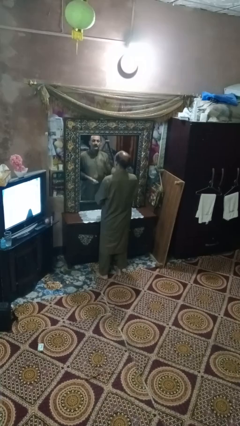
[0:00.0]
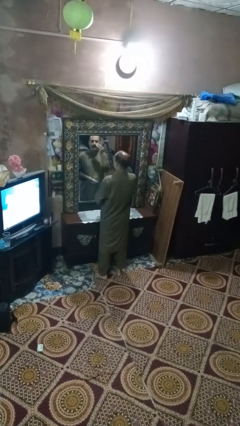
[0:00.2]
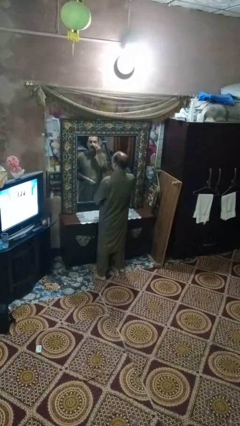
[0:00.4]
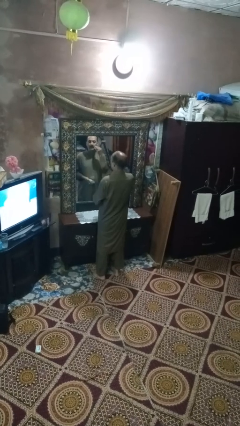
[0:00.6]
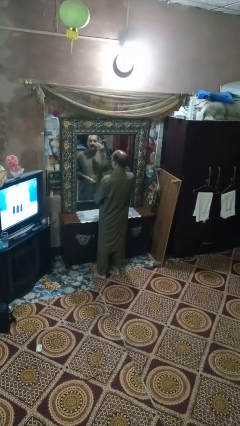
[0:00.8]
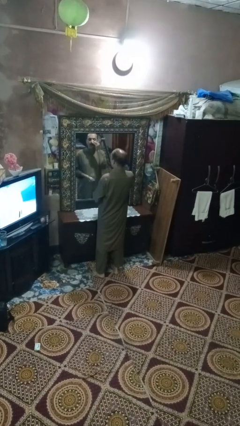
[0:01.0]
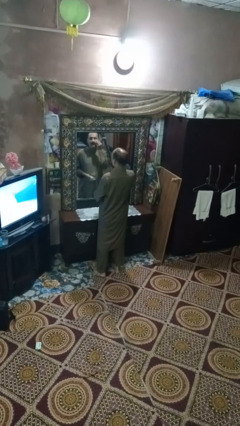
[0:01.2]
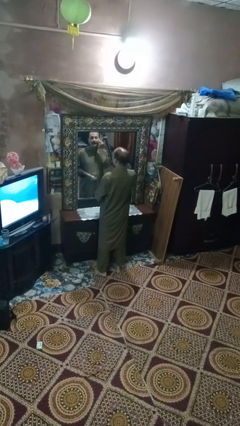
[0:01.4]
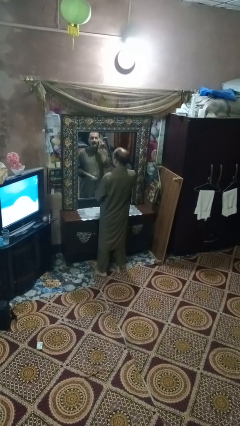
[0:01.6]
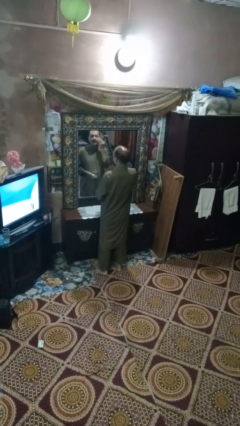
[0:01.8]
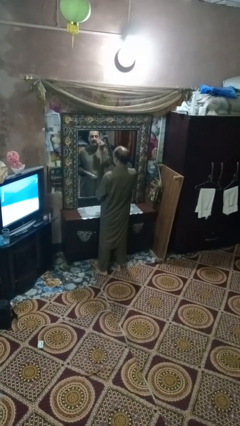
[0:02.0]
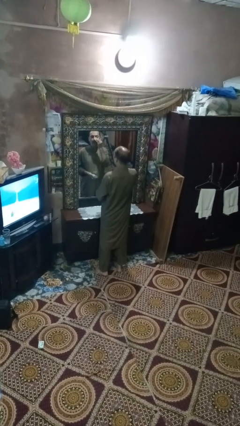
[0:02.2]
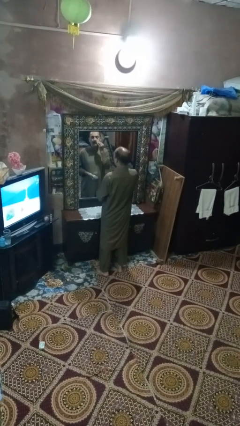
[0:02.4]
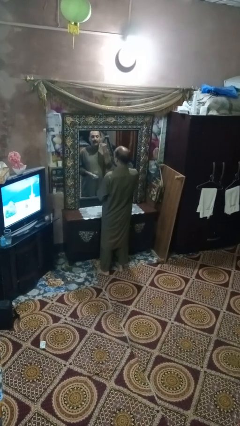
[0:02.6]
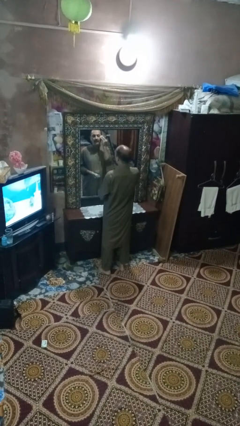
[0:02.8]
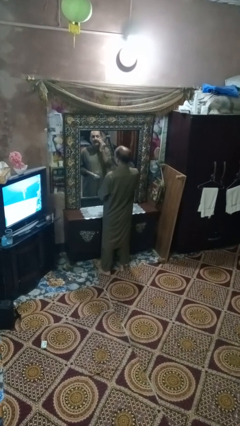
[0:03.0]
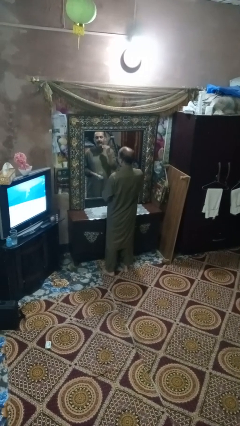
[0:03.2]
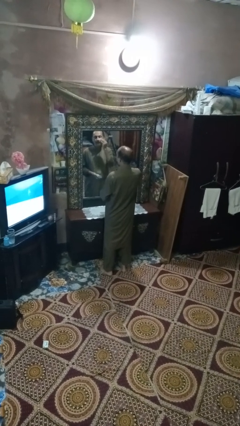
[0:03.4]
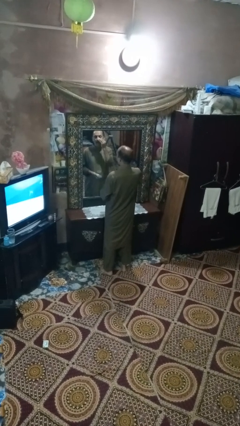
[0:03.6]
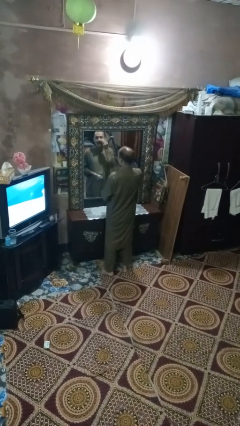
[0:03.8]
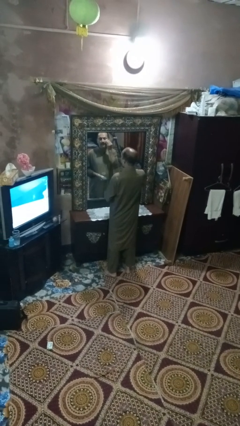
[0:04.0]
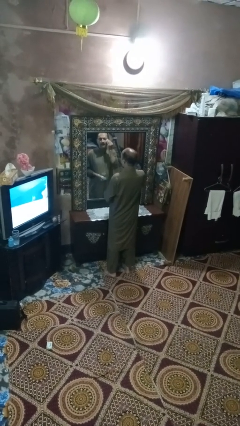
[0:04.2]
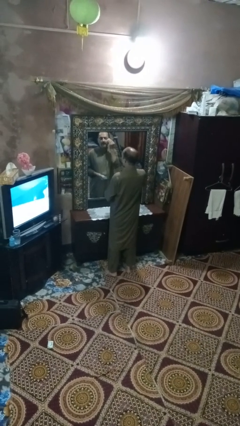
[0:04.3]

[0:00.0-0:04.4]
person applies foundation makeup

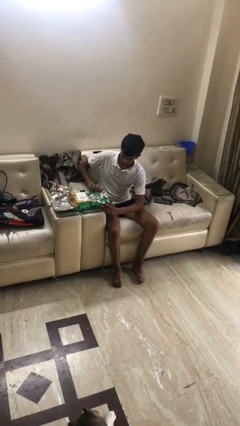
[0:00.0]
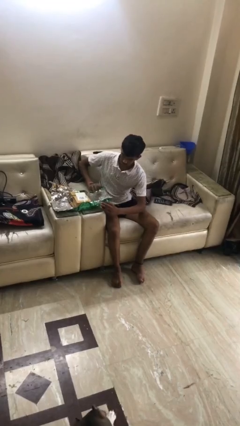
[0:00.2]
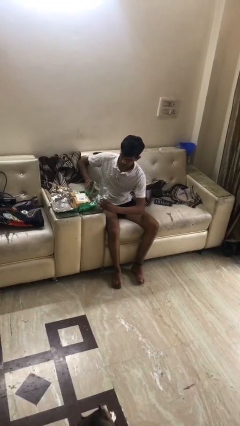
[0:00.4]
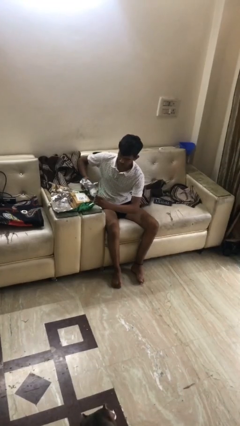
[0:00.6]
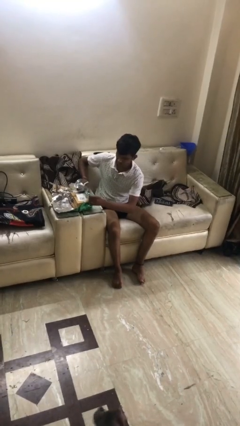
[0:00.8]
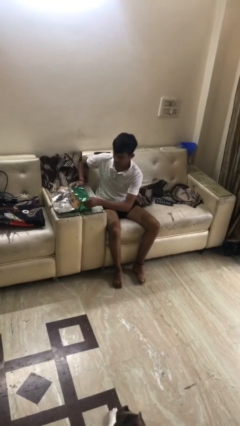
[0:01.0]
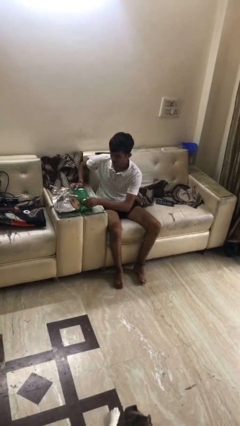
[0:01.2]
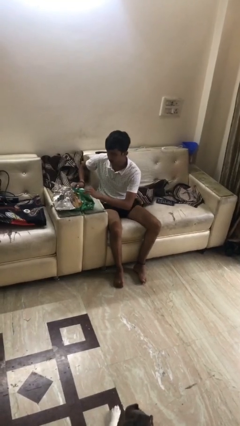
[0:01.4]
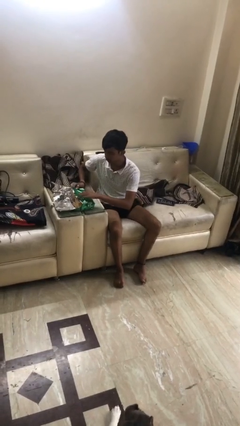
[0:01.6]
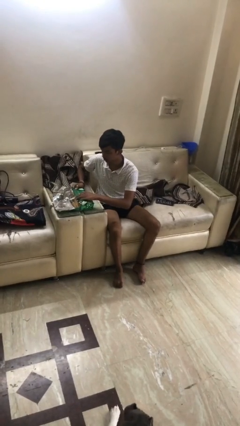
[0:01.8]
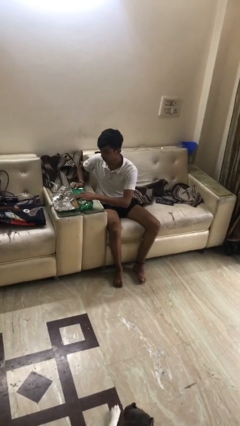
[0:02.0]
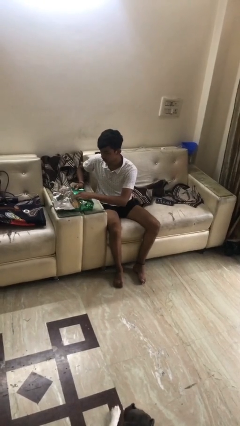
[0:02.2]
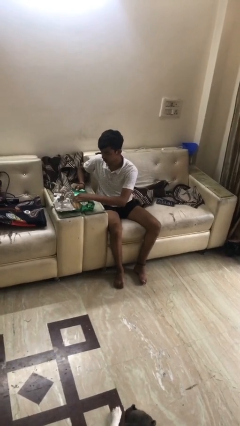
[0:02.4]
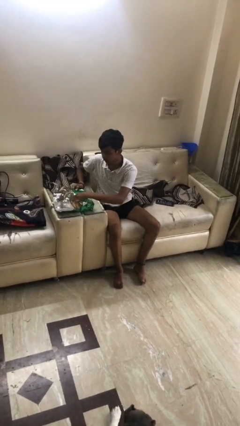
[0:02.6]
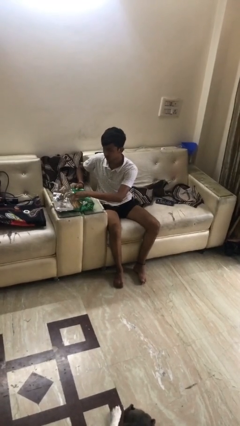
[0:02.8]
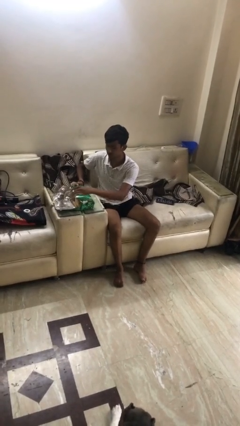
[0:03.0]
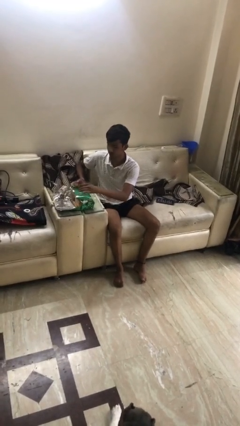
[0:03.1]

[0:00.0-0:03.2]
person wraps box

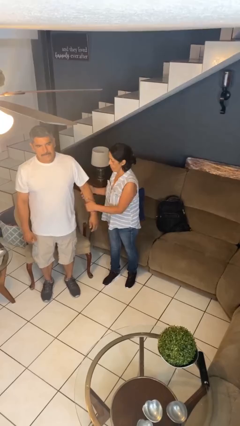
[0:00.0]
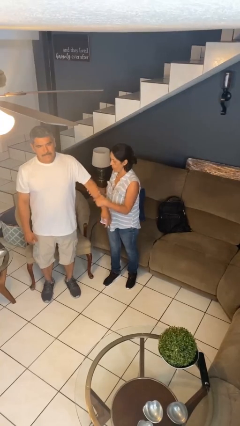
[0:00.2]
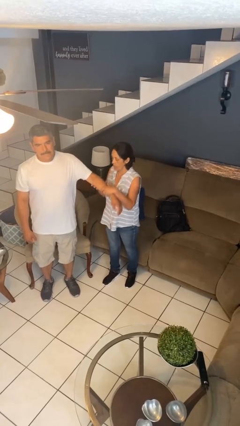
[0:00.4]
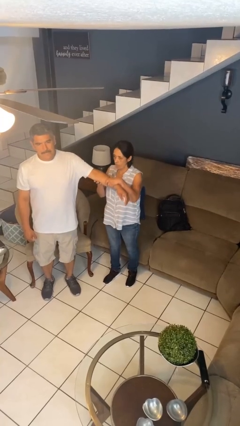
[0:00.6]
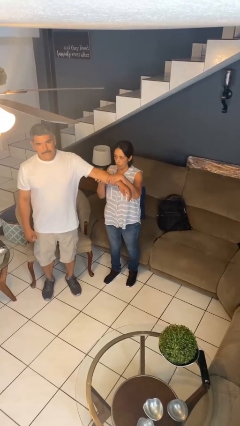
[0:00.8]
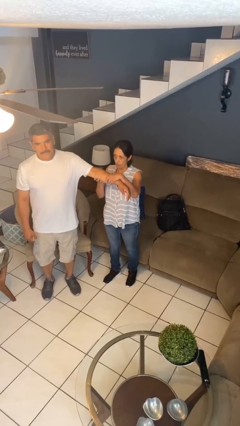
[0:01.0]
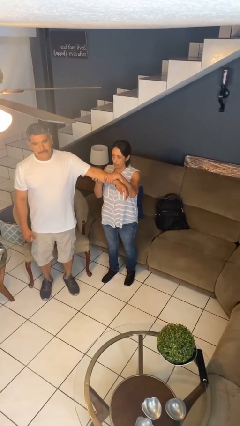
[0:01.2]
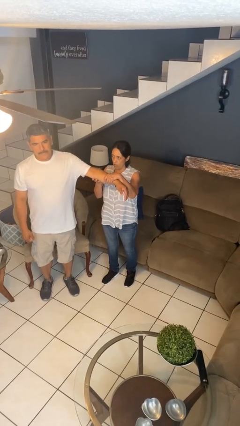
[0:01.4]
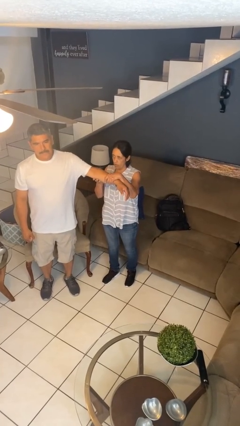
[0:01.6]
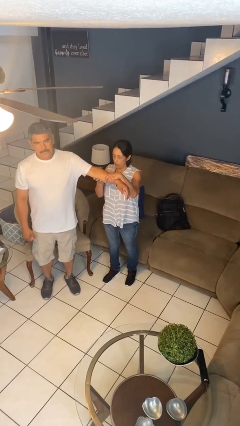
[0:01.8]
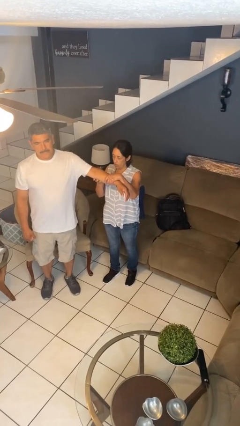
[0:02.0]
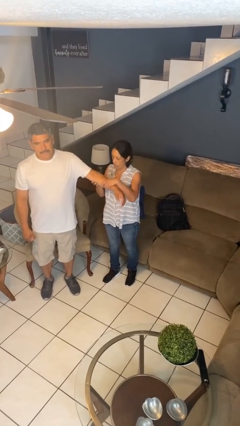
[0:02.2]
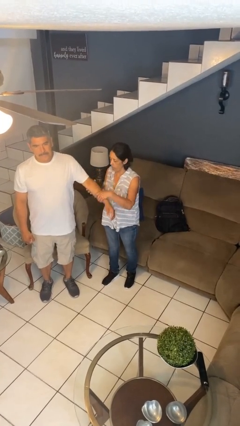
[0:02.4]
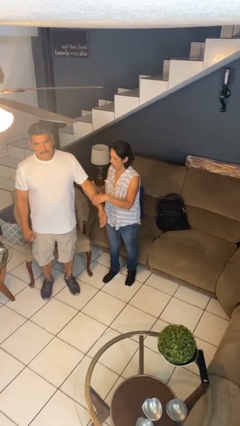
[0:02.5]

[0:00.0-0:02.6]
person grabs person by forearm

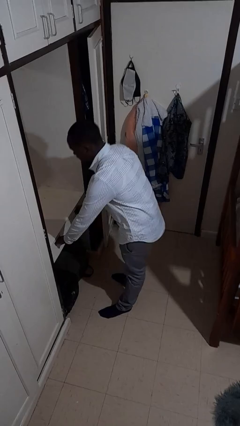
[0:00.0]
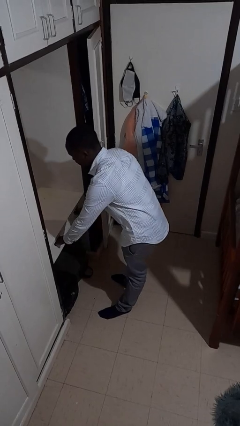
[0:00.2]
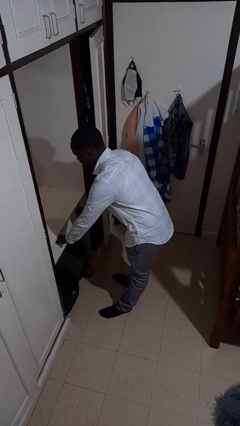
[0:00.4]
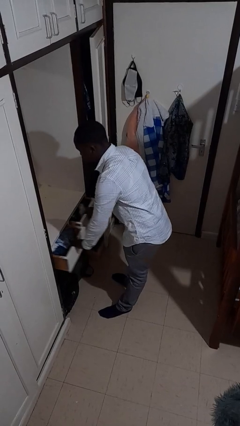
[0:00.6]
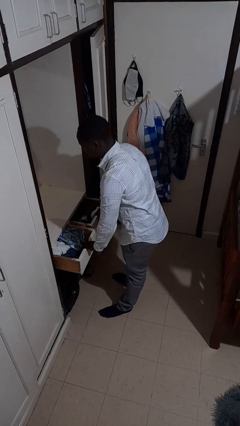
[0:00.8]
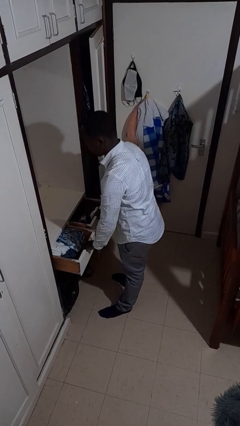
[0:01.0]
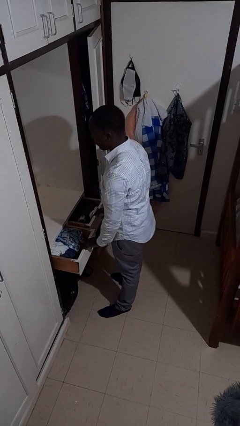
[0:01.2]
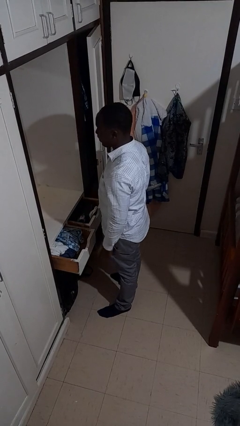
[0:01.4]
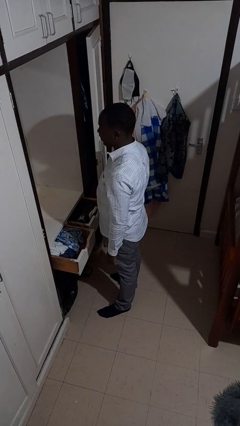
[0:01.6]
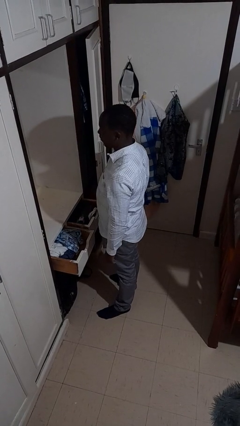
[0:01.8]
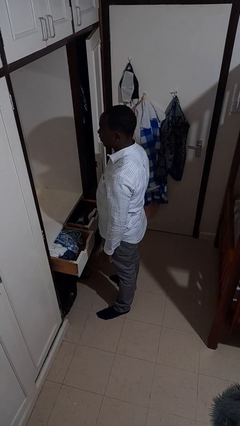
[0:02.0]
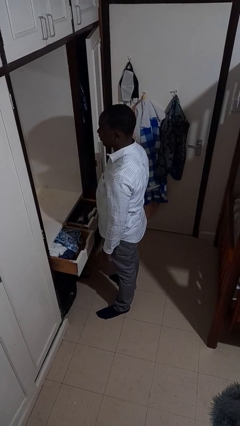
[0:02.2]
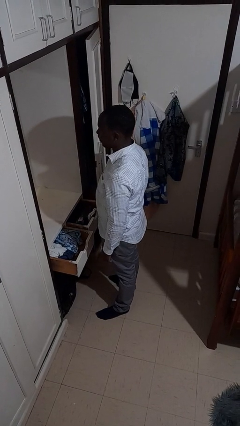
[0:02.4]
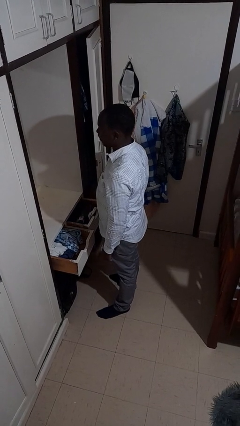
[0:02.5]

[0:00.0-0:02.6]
person opens dresser drawer

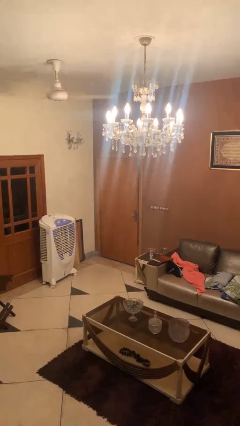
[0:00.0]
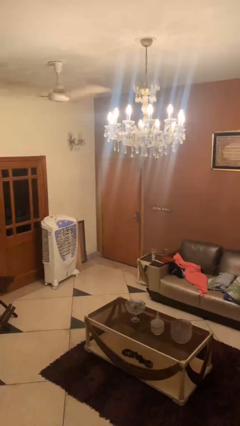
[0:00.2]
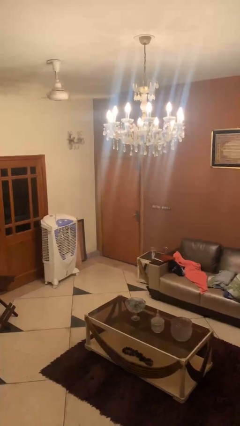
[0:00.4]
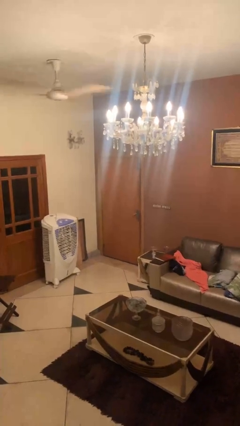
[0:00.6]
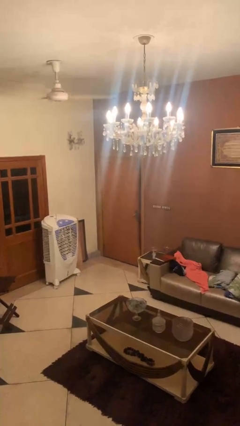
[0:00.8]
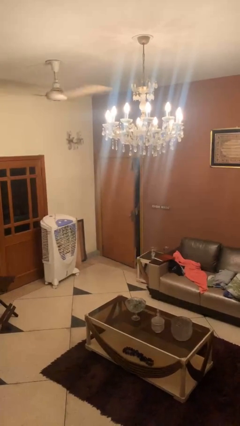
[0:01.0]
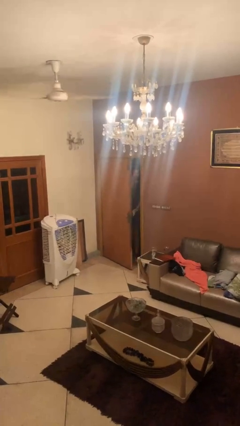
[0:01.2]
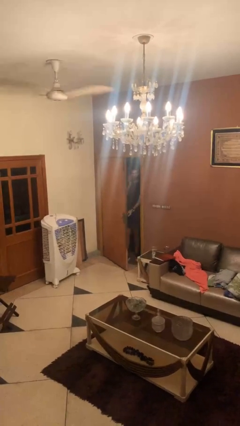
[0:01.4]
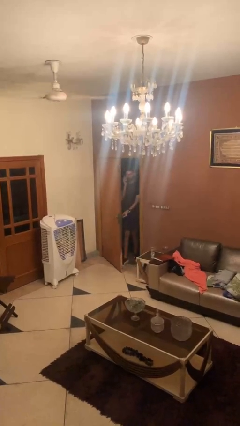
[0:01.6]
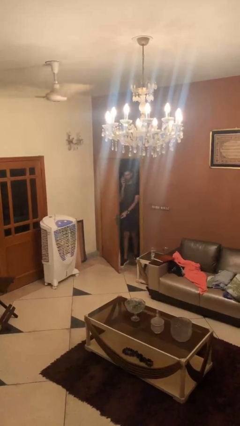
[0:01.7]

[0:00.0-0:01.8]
person opens facility door

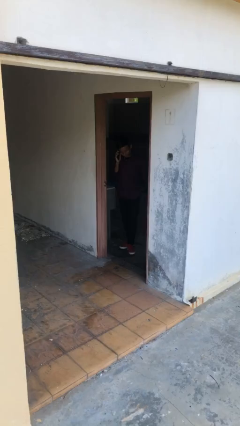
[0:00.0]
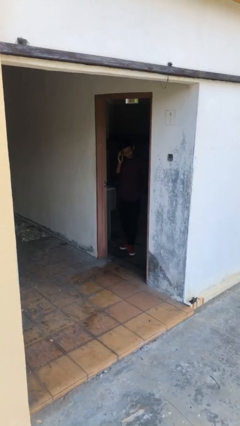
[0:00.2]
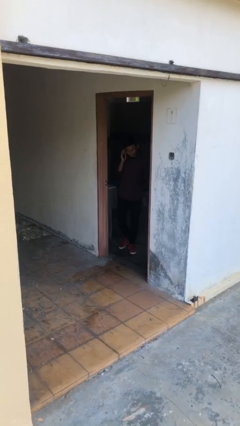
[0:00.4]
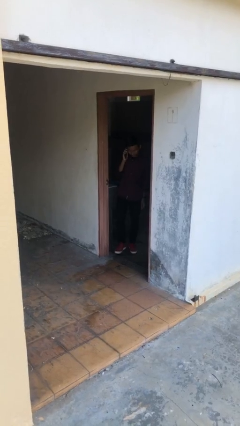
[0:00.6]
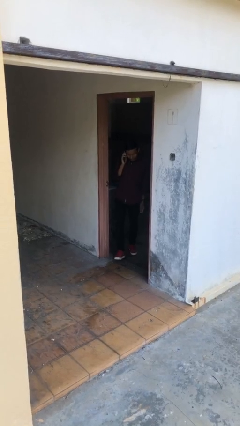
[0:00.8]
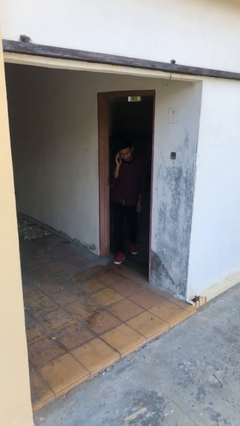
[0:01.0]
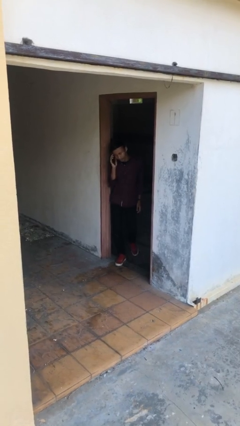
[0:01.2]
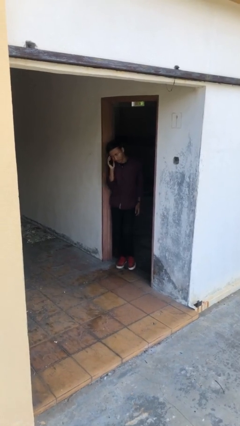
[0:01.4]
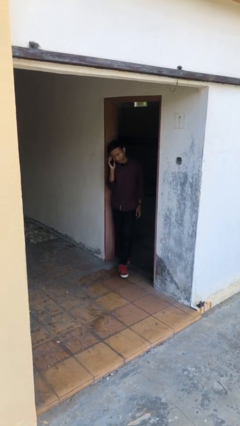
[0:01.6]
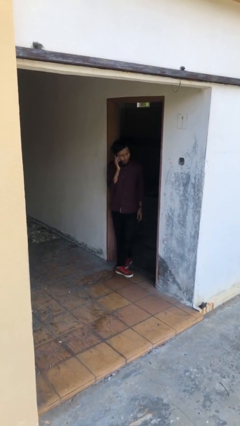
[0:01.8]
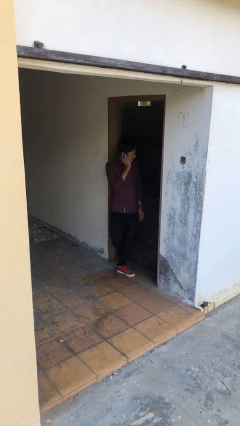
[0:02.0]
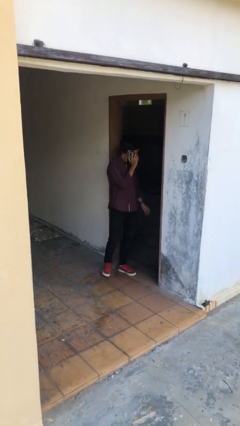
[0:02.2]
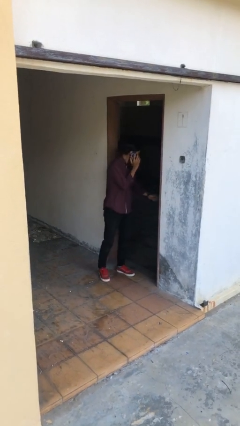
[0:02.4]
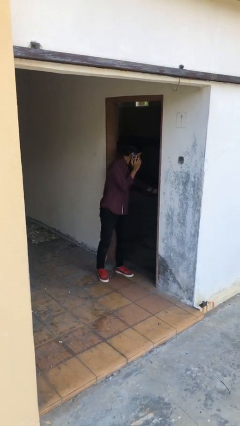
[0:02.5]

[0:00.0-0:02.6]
person enters scene through structure
